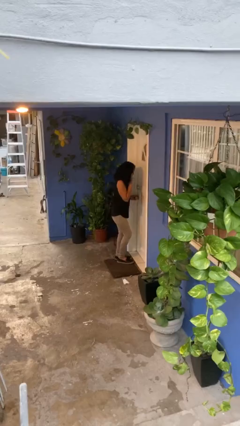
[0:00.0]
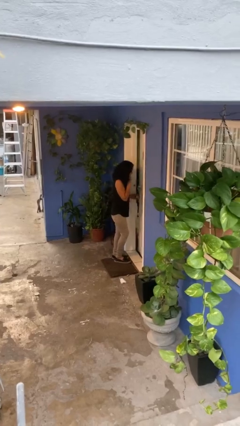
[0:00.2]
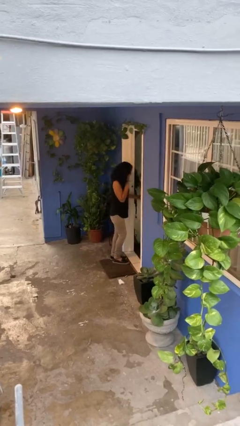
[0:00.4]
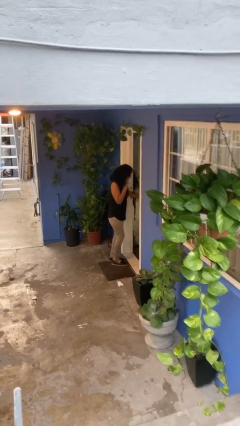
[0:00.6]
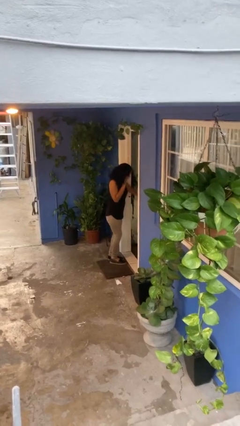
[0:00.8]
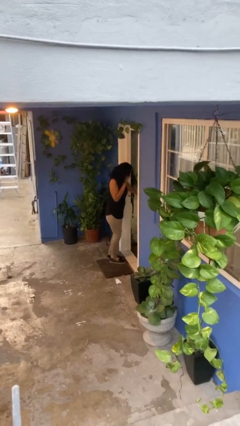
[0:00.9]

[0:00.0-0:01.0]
person opens facility door

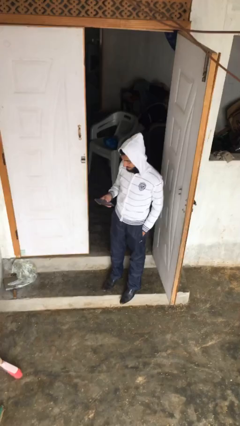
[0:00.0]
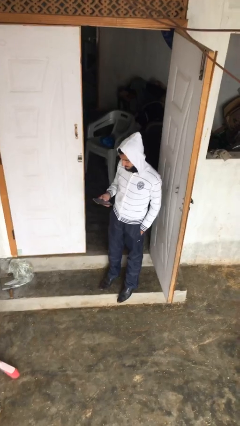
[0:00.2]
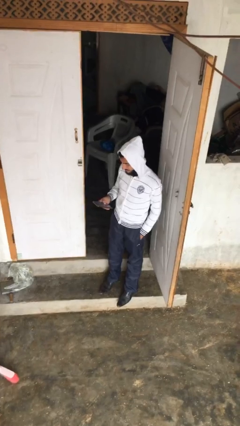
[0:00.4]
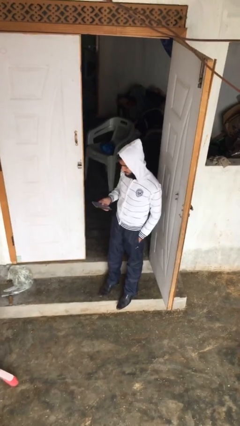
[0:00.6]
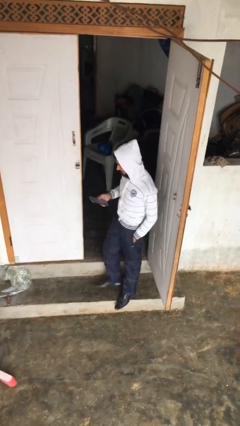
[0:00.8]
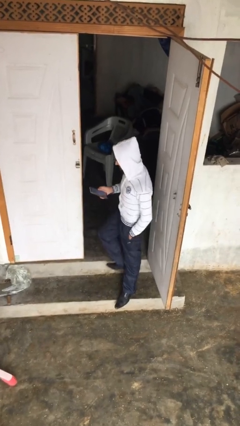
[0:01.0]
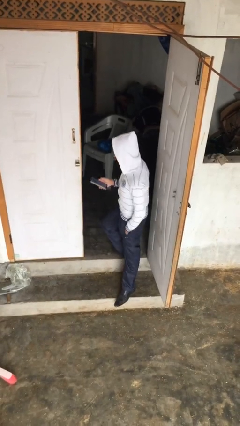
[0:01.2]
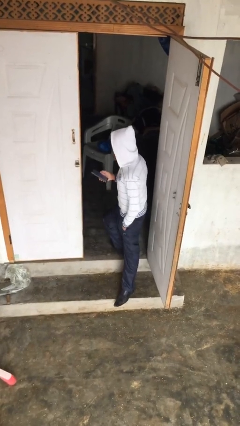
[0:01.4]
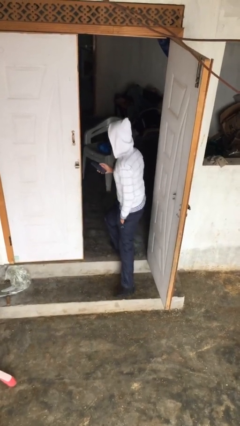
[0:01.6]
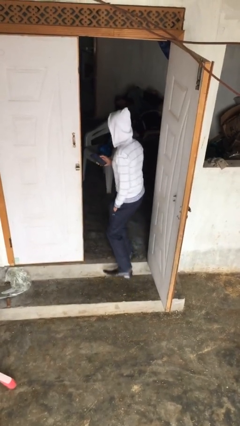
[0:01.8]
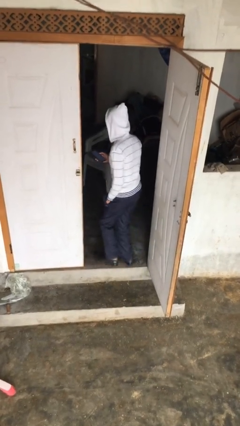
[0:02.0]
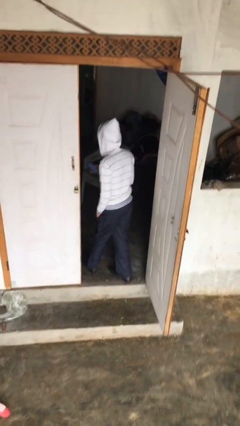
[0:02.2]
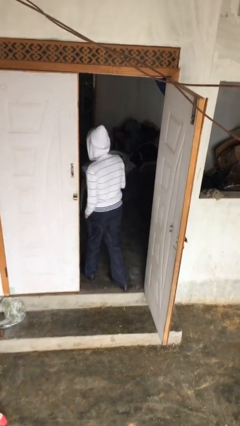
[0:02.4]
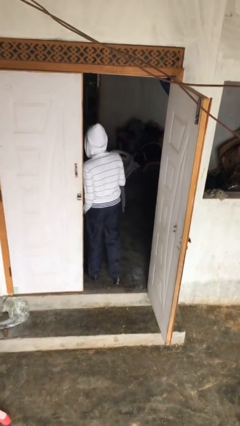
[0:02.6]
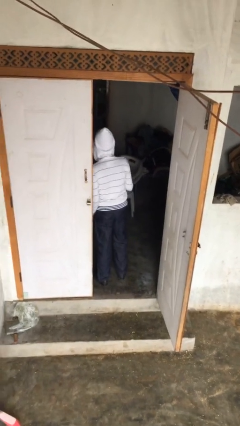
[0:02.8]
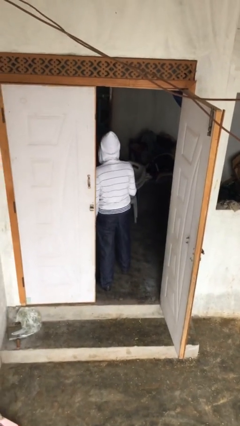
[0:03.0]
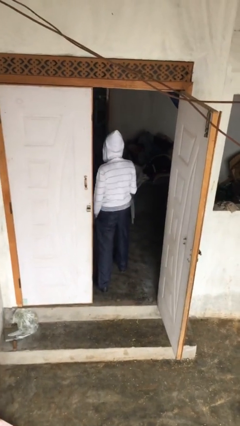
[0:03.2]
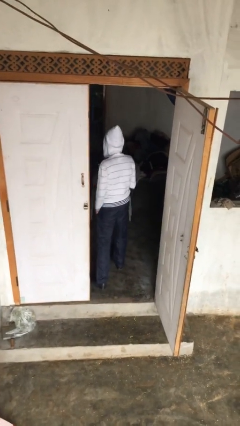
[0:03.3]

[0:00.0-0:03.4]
person exits scene through structure

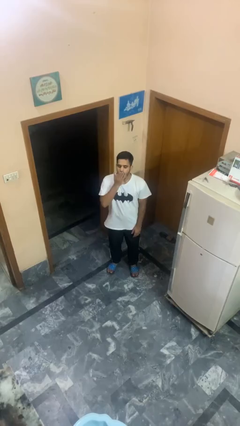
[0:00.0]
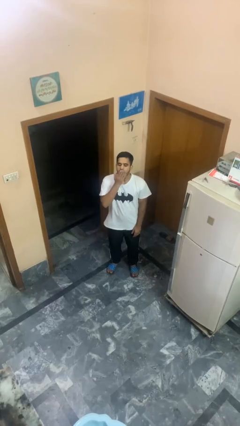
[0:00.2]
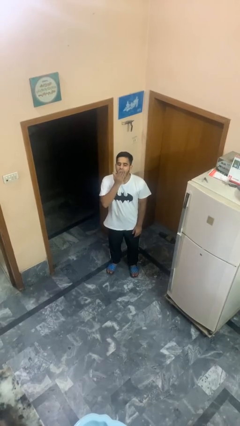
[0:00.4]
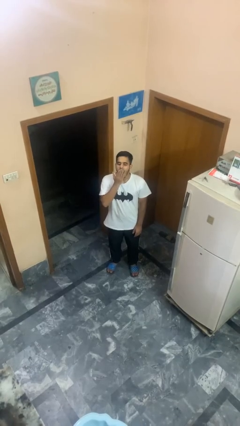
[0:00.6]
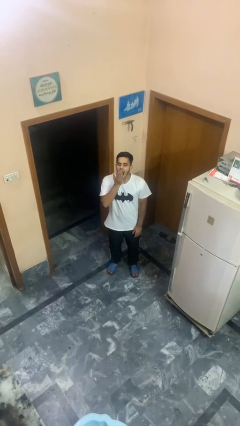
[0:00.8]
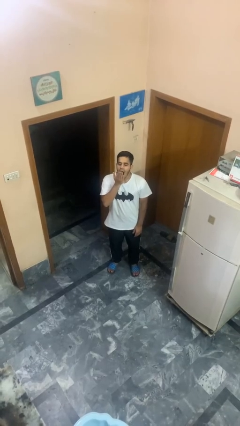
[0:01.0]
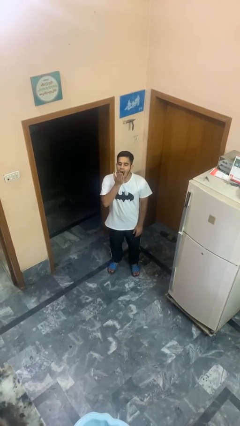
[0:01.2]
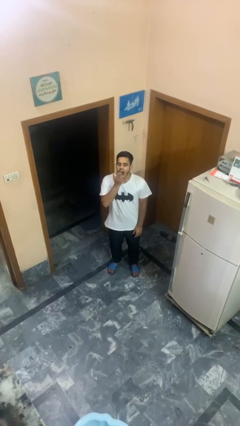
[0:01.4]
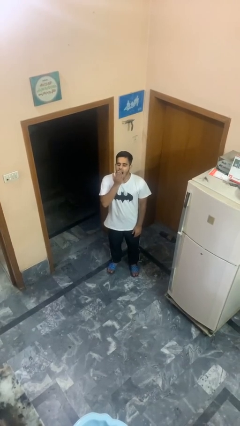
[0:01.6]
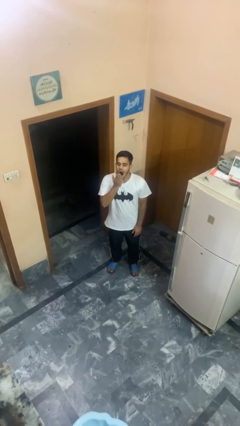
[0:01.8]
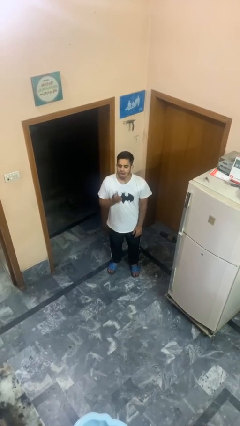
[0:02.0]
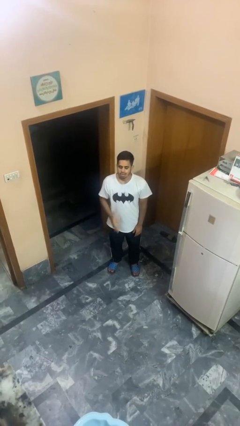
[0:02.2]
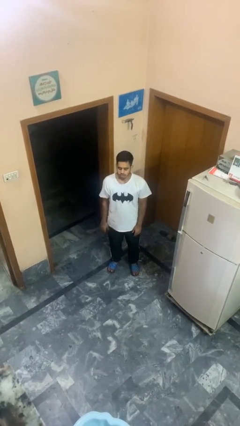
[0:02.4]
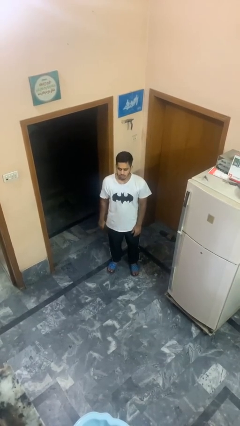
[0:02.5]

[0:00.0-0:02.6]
person yawns

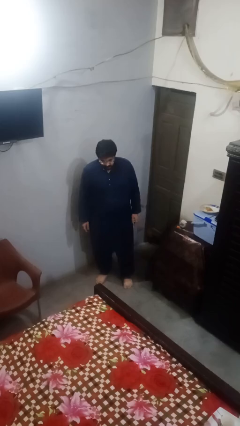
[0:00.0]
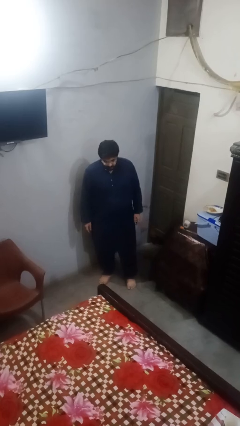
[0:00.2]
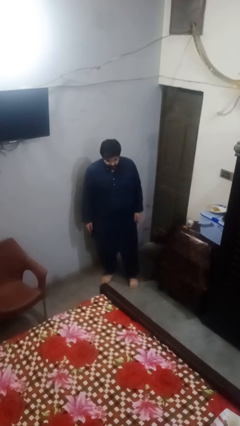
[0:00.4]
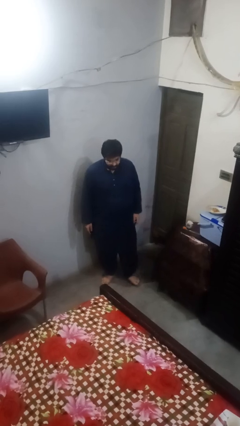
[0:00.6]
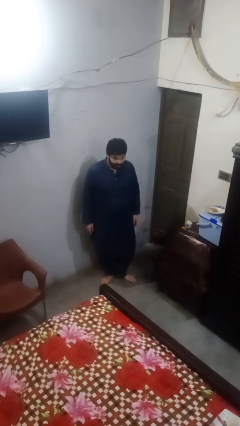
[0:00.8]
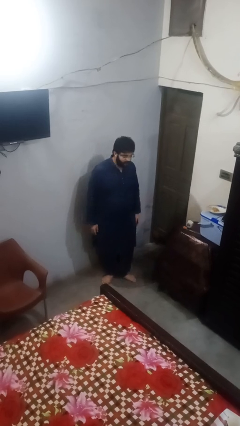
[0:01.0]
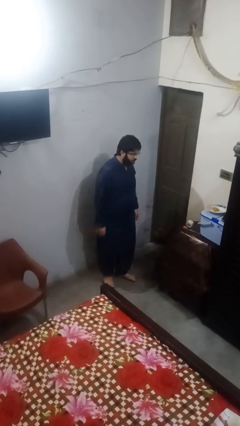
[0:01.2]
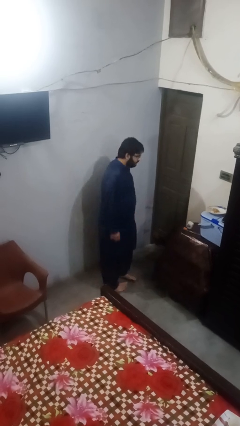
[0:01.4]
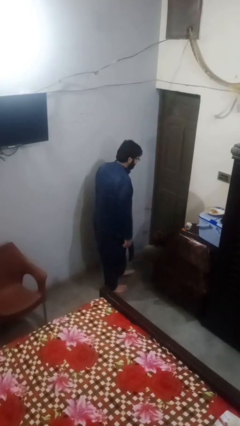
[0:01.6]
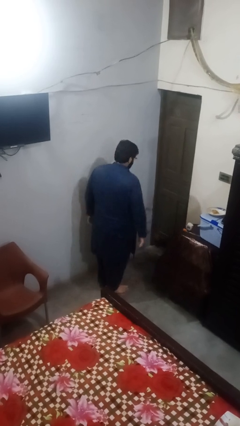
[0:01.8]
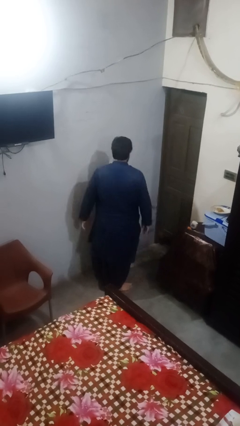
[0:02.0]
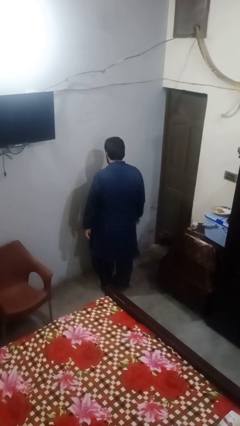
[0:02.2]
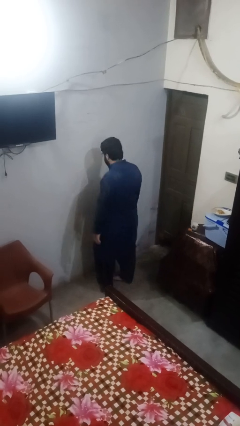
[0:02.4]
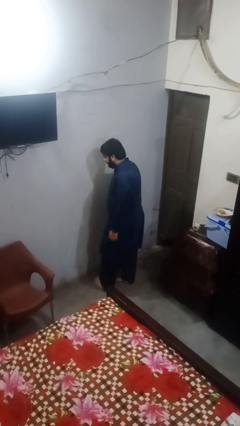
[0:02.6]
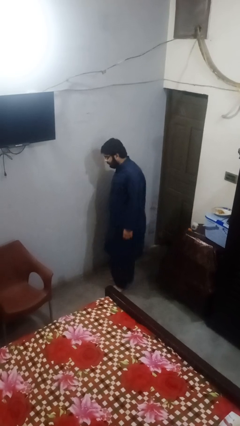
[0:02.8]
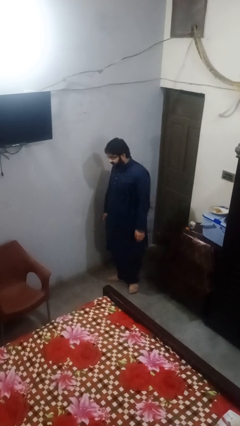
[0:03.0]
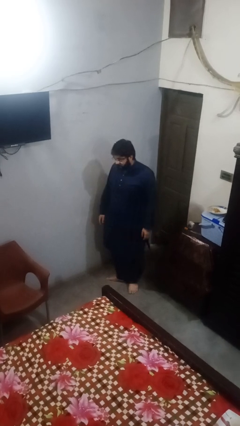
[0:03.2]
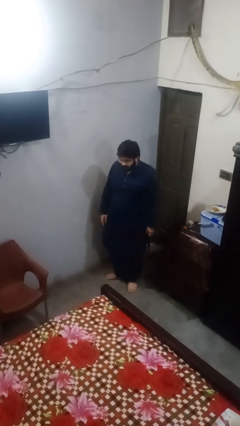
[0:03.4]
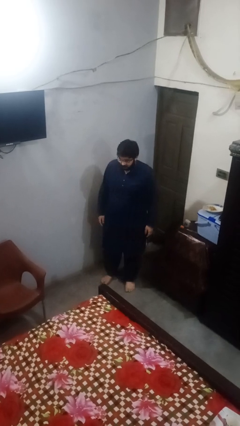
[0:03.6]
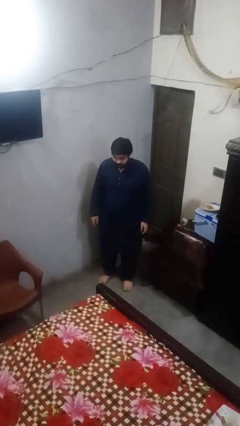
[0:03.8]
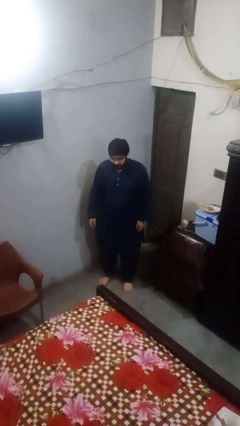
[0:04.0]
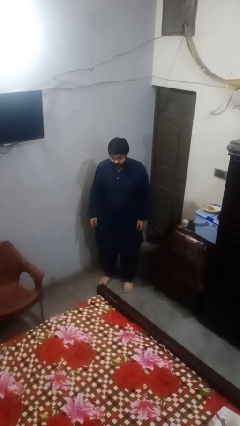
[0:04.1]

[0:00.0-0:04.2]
person twirls

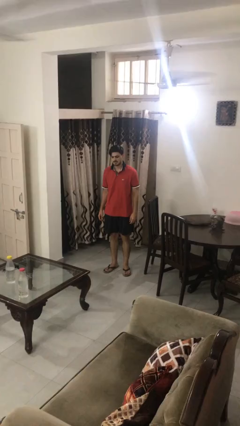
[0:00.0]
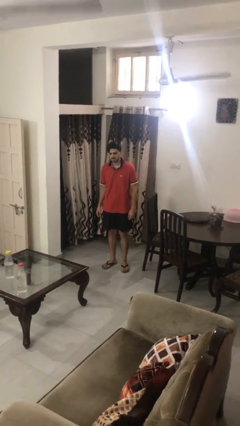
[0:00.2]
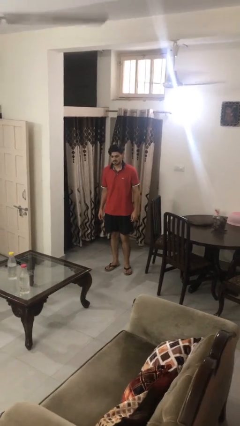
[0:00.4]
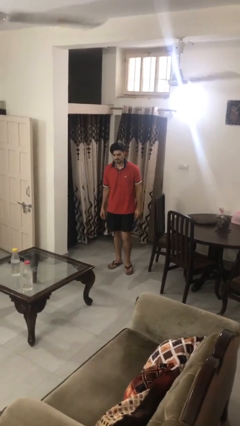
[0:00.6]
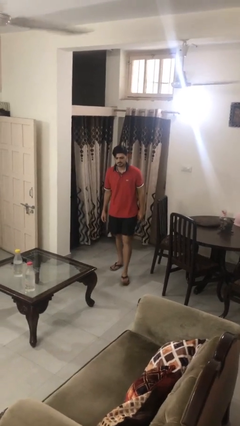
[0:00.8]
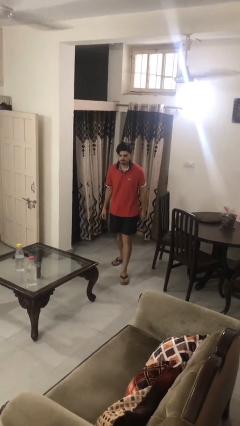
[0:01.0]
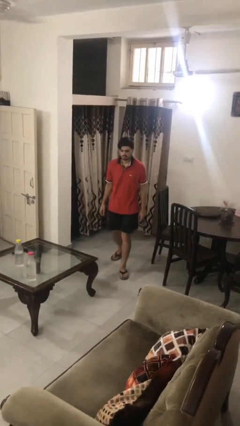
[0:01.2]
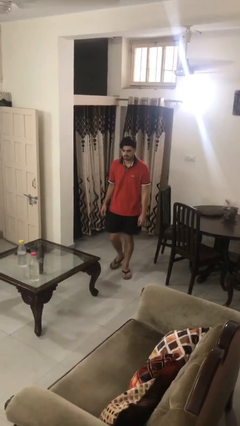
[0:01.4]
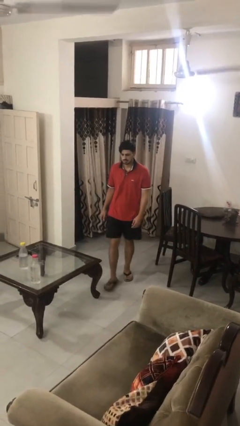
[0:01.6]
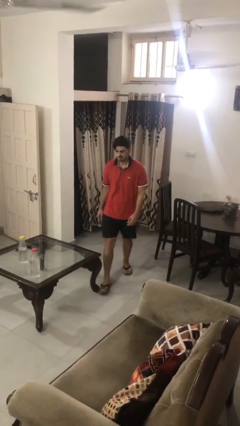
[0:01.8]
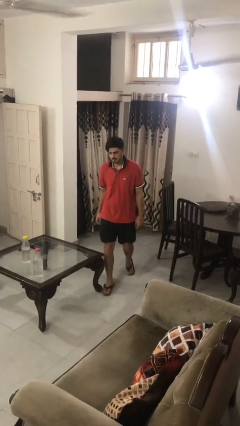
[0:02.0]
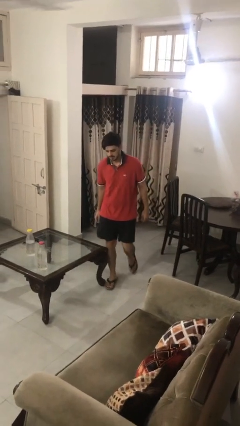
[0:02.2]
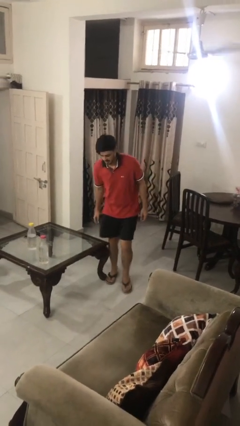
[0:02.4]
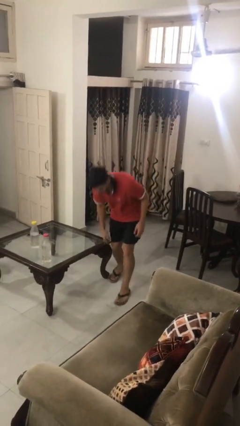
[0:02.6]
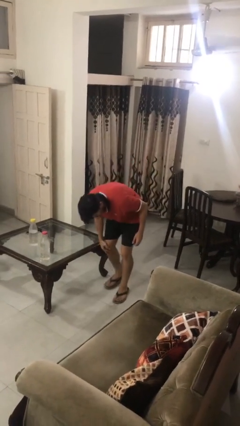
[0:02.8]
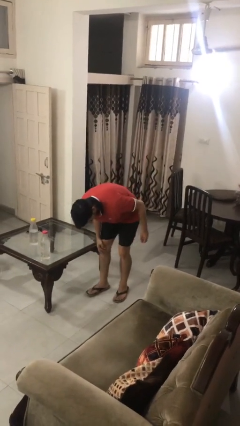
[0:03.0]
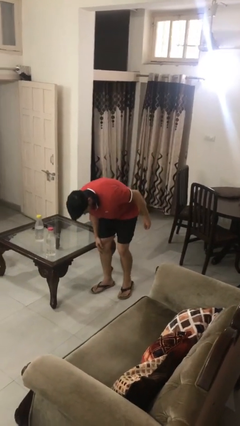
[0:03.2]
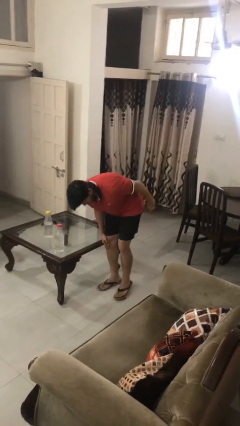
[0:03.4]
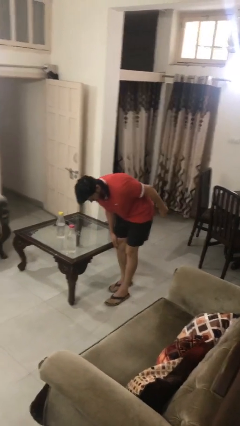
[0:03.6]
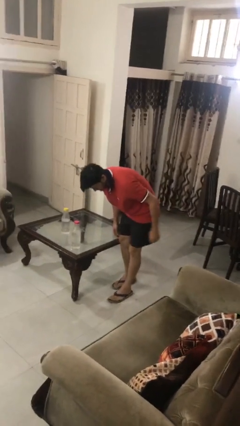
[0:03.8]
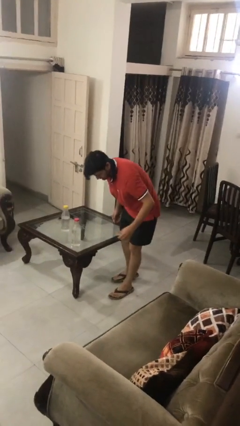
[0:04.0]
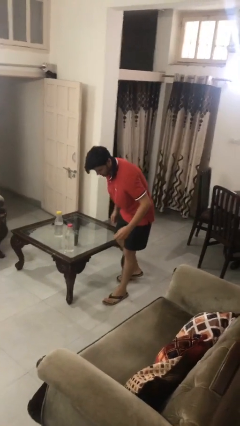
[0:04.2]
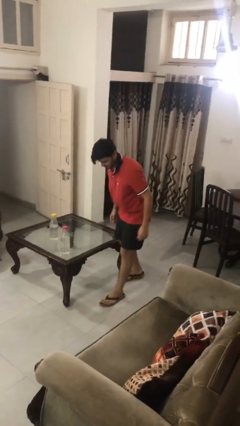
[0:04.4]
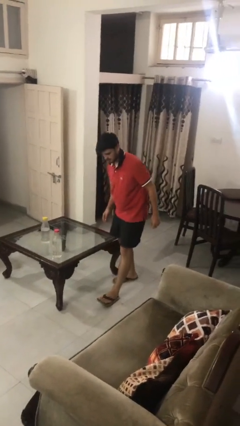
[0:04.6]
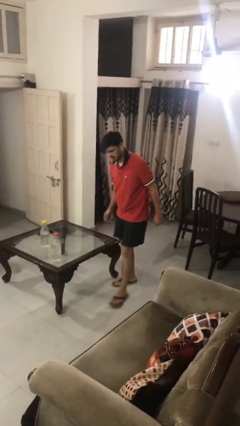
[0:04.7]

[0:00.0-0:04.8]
person bumps into table

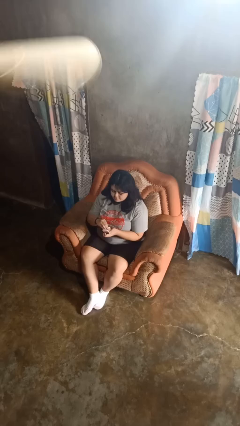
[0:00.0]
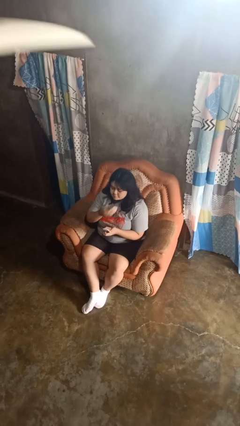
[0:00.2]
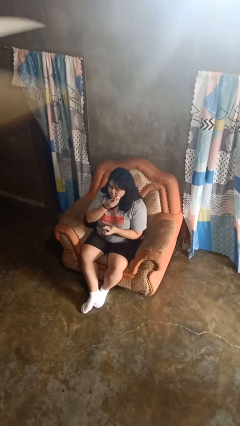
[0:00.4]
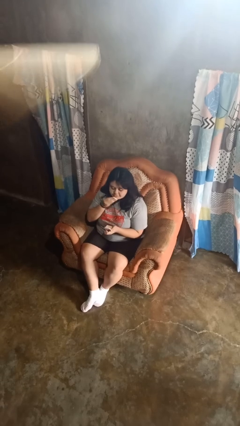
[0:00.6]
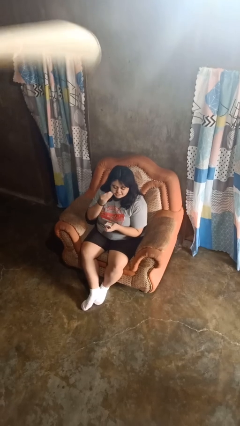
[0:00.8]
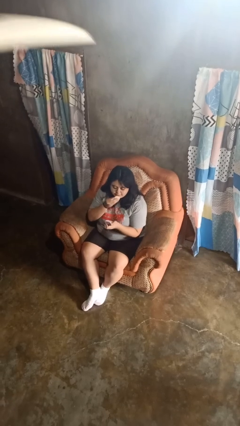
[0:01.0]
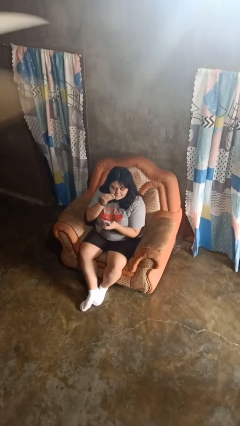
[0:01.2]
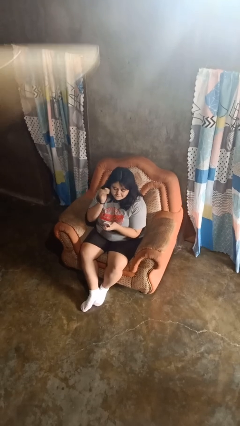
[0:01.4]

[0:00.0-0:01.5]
person applies foundation makeup
